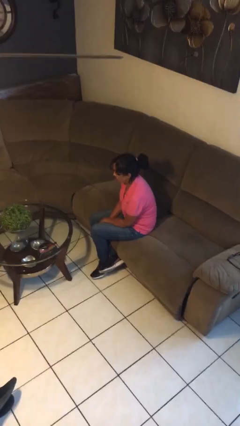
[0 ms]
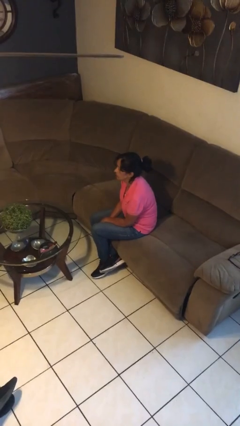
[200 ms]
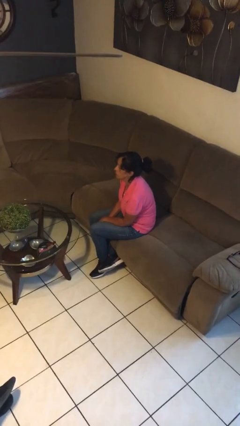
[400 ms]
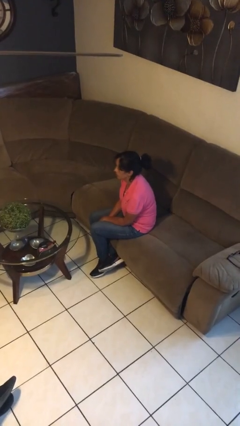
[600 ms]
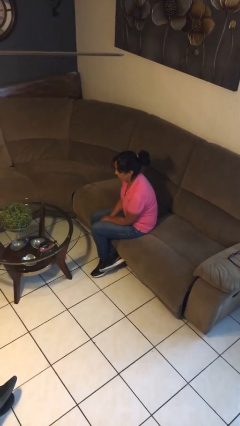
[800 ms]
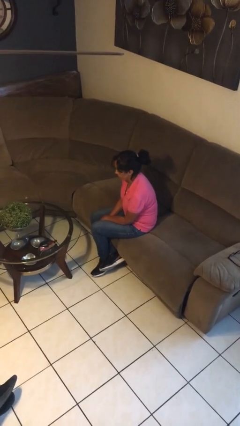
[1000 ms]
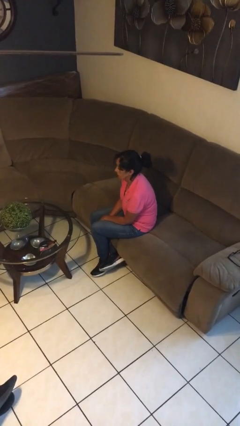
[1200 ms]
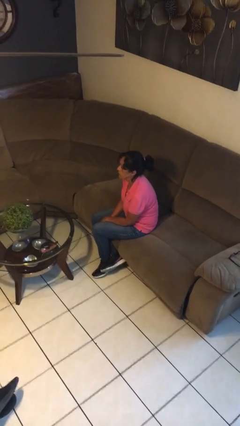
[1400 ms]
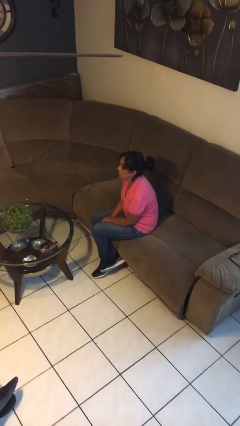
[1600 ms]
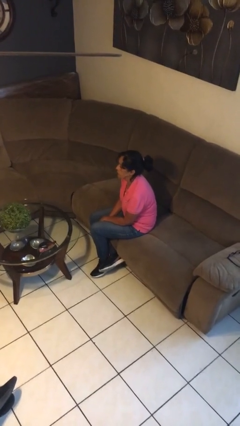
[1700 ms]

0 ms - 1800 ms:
person nods head

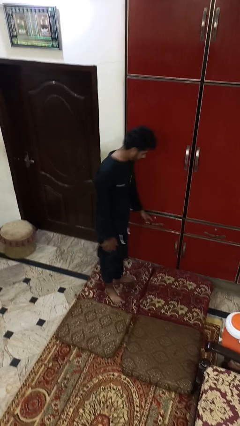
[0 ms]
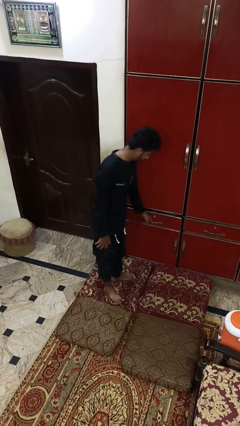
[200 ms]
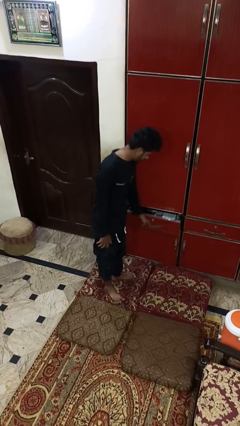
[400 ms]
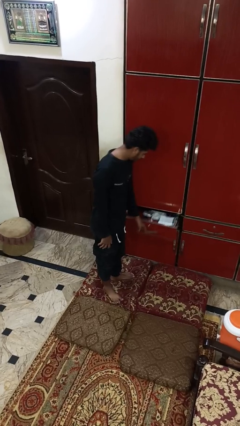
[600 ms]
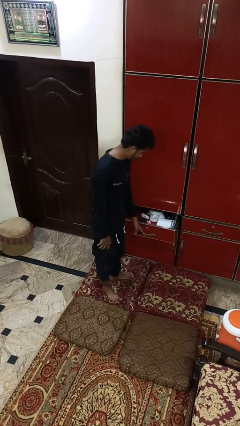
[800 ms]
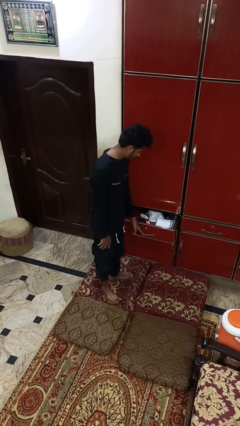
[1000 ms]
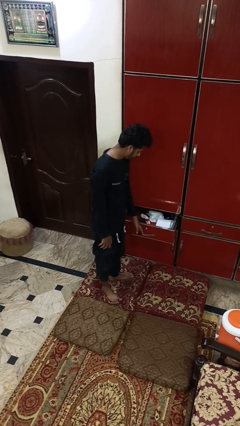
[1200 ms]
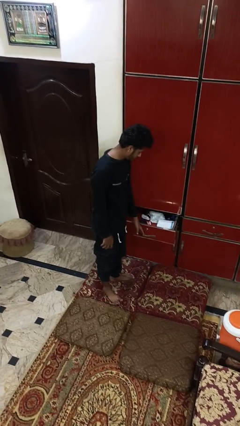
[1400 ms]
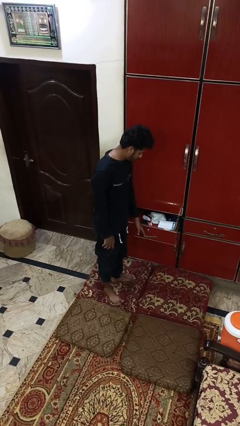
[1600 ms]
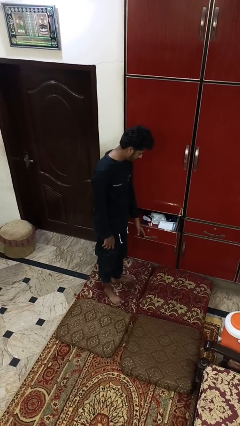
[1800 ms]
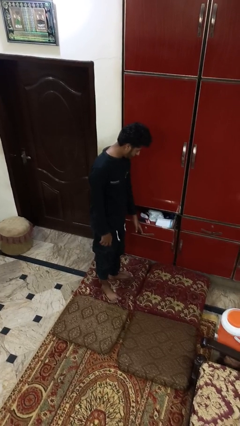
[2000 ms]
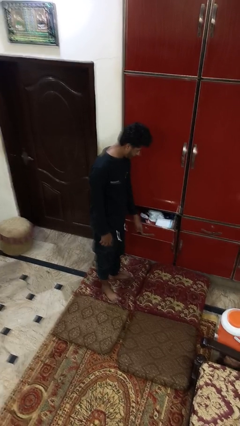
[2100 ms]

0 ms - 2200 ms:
person opens dresser drawer

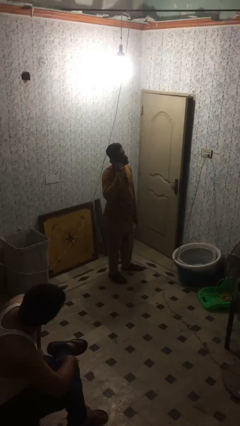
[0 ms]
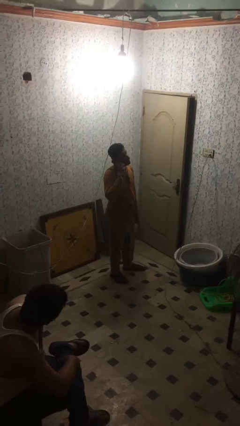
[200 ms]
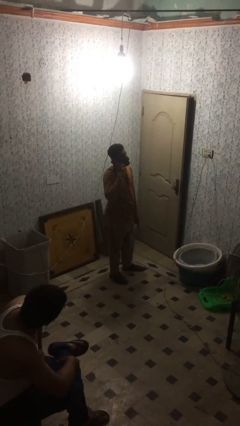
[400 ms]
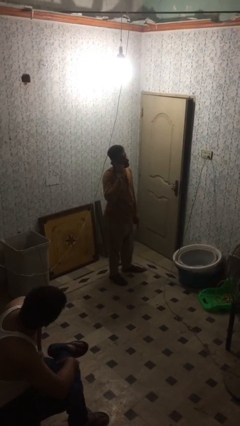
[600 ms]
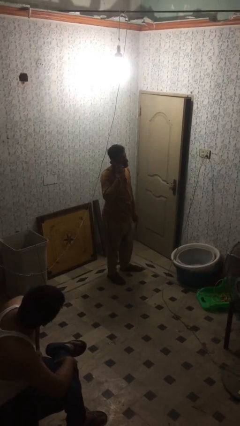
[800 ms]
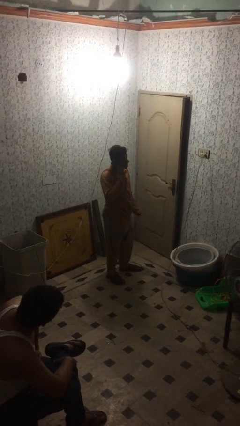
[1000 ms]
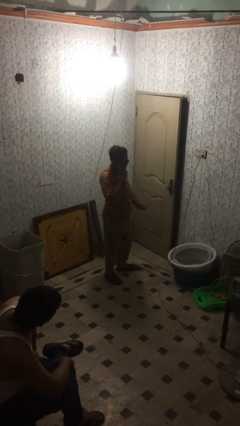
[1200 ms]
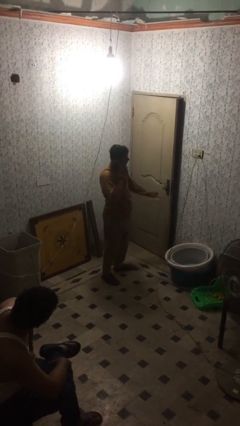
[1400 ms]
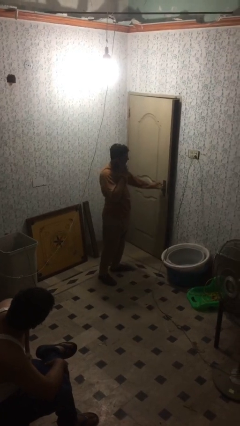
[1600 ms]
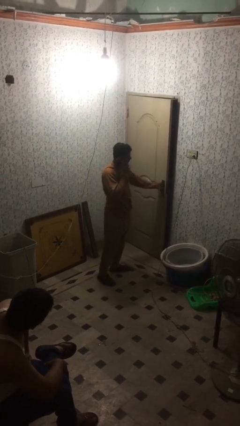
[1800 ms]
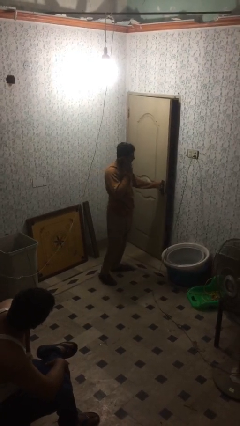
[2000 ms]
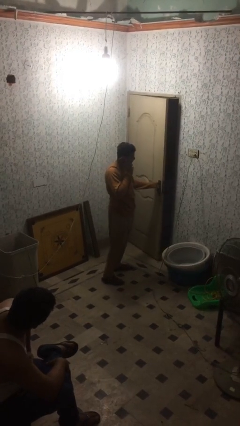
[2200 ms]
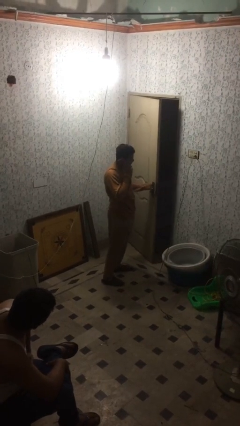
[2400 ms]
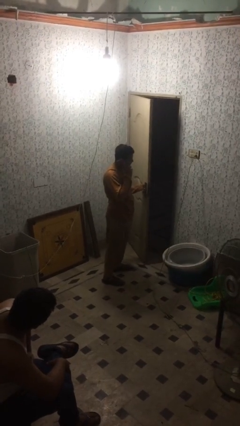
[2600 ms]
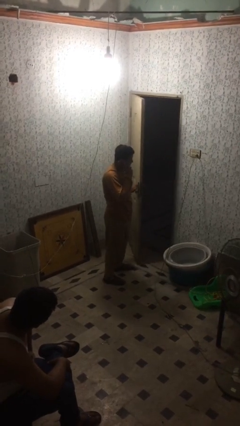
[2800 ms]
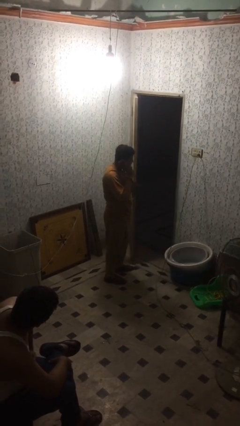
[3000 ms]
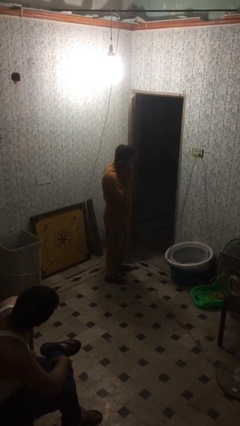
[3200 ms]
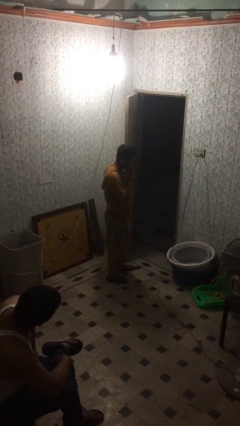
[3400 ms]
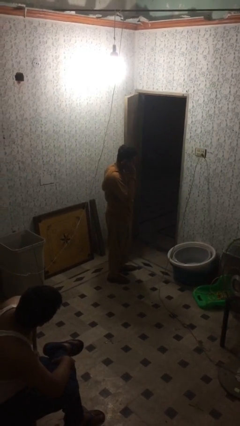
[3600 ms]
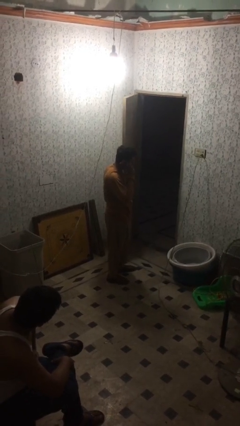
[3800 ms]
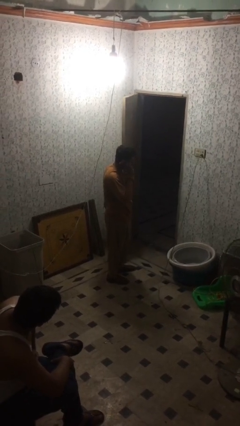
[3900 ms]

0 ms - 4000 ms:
person opens facility door

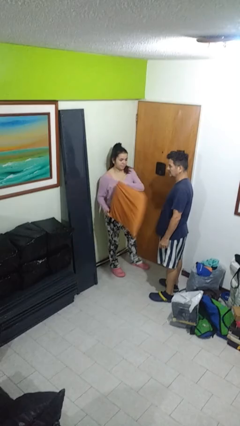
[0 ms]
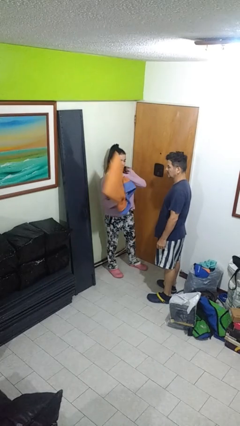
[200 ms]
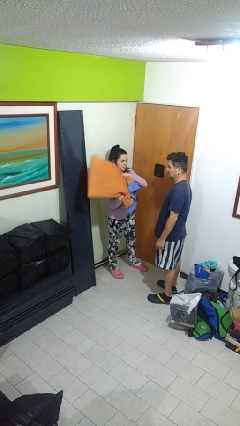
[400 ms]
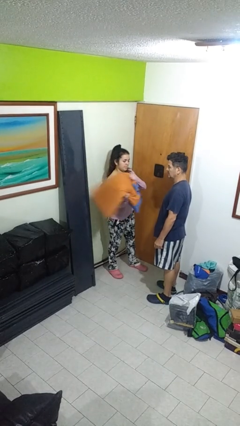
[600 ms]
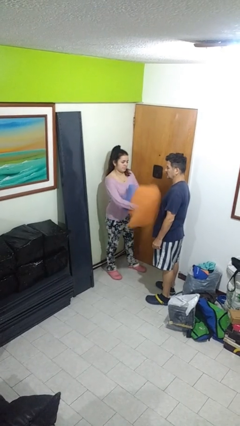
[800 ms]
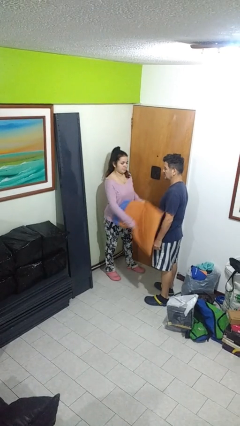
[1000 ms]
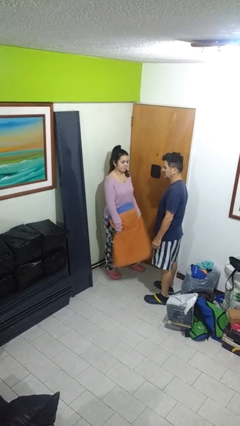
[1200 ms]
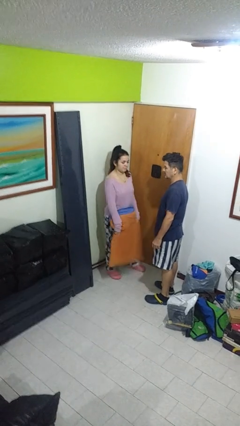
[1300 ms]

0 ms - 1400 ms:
person hits person with pillow

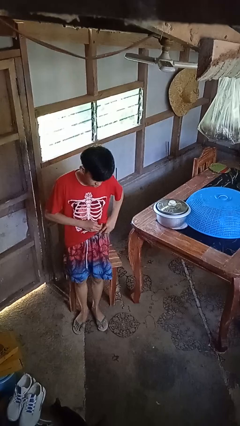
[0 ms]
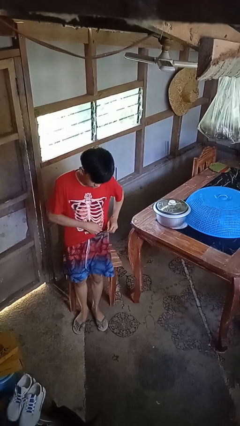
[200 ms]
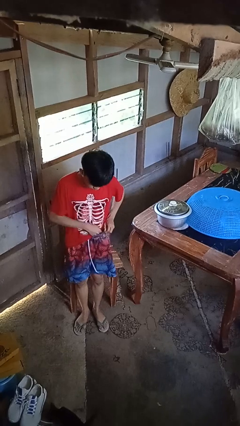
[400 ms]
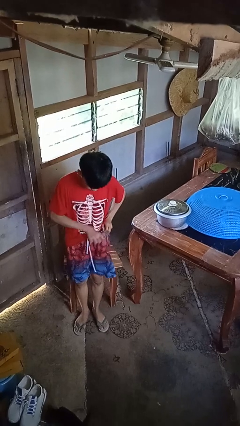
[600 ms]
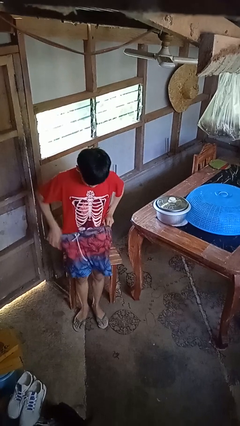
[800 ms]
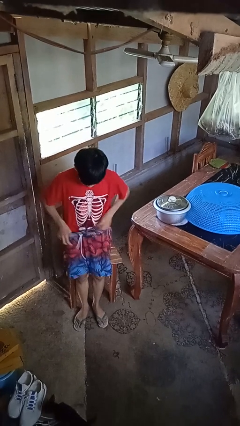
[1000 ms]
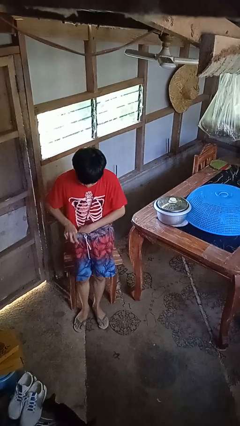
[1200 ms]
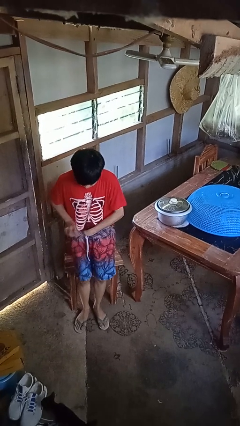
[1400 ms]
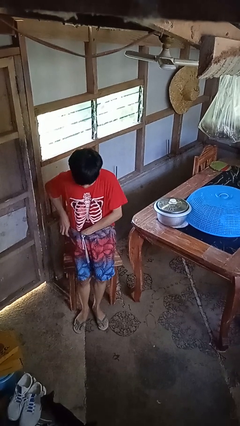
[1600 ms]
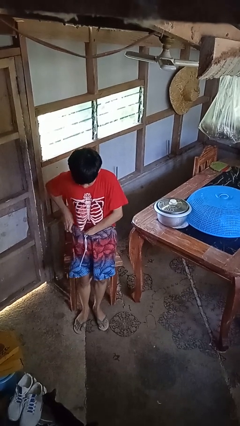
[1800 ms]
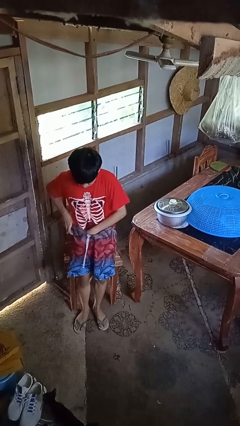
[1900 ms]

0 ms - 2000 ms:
person tucks in shirt

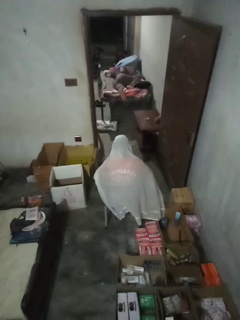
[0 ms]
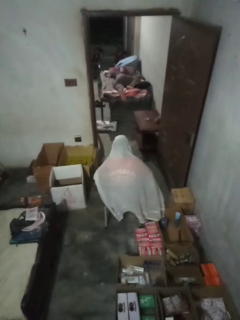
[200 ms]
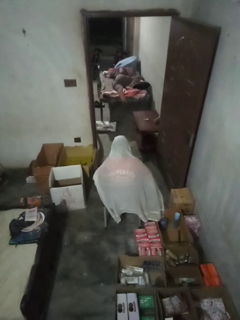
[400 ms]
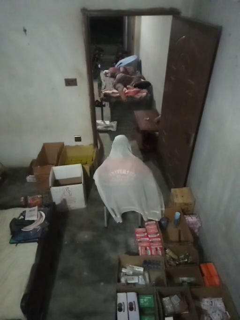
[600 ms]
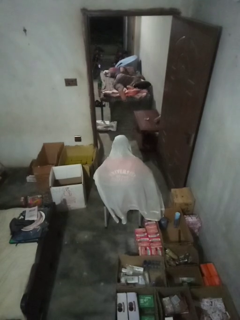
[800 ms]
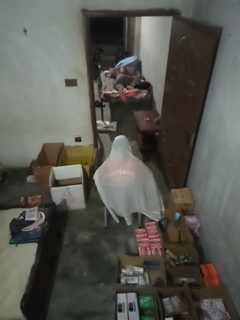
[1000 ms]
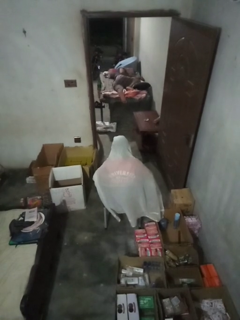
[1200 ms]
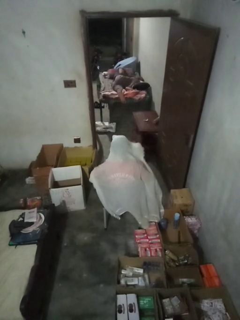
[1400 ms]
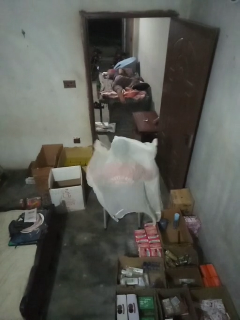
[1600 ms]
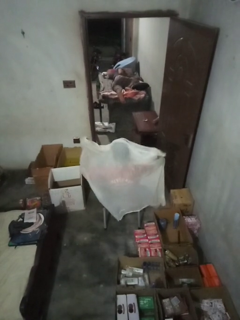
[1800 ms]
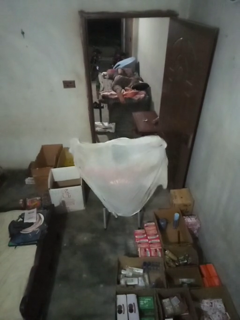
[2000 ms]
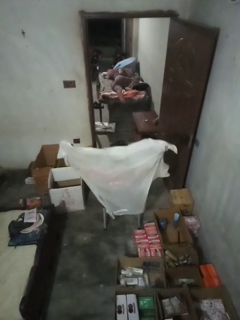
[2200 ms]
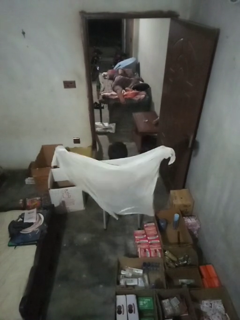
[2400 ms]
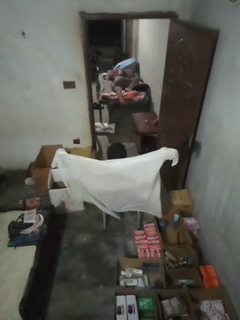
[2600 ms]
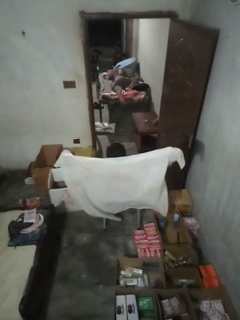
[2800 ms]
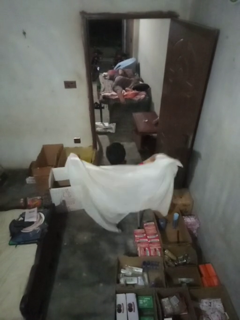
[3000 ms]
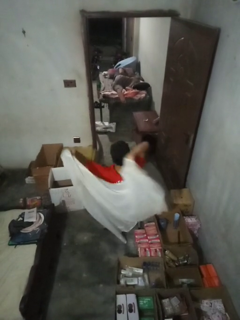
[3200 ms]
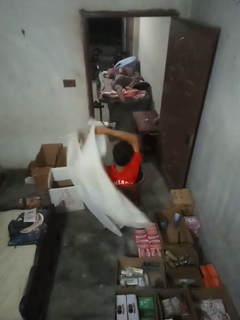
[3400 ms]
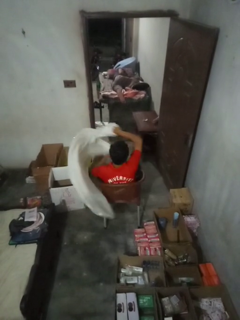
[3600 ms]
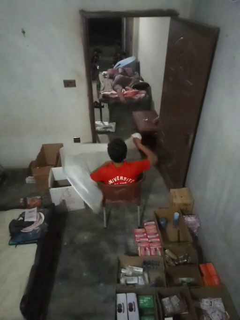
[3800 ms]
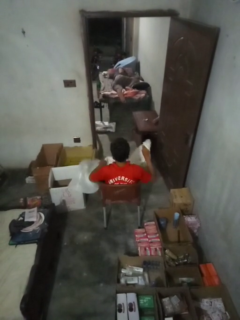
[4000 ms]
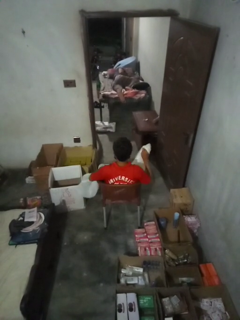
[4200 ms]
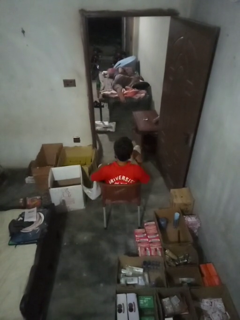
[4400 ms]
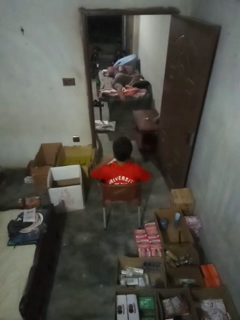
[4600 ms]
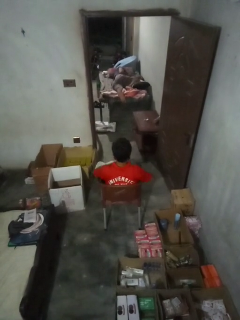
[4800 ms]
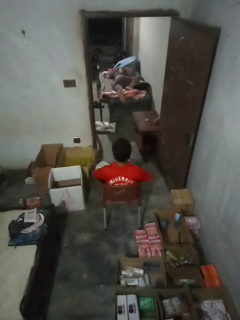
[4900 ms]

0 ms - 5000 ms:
person uncovers with blanket

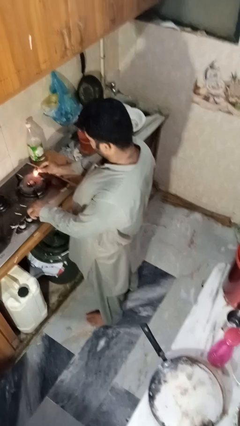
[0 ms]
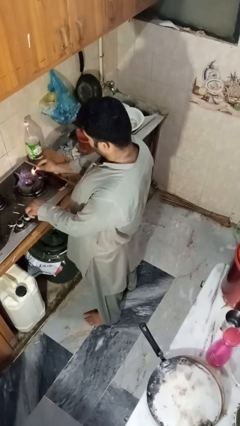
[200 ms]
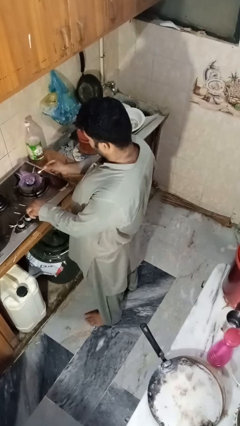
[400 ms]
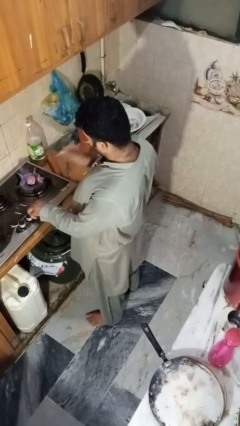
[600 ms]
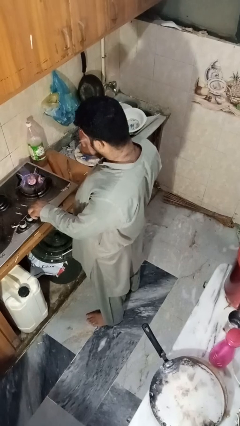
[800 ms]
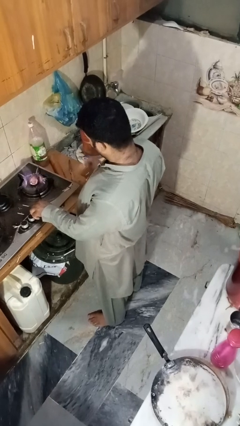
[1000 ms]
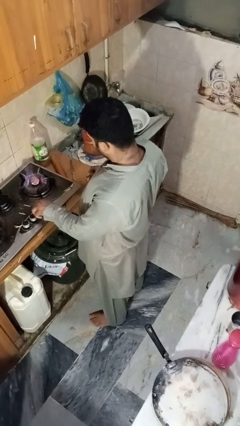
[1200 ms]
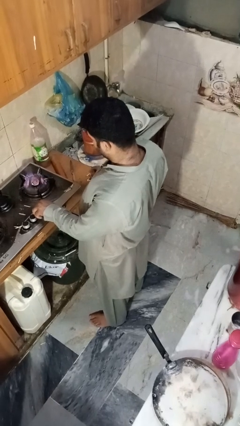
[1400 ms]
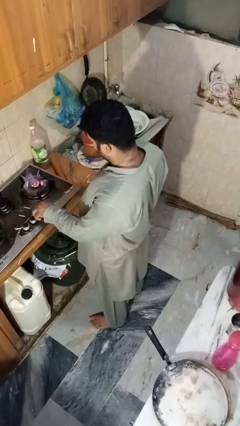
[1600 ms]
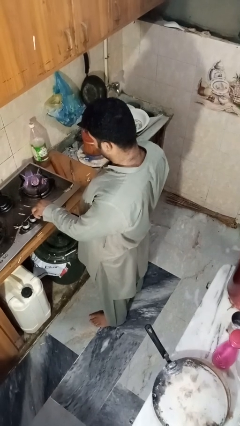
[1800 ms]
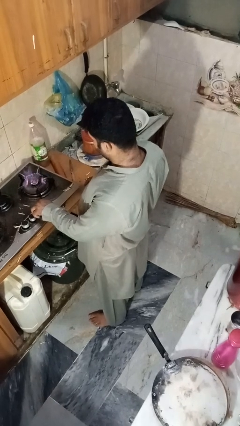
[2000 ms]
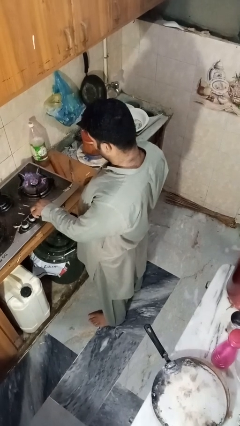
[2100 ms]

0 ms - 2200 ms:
person turns off stovetop
